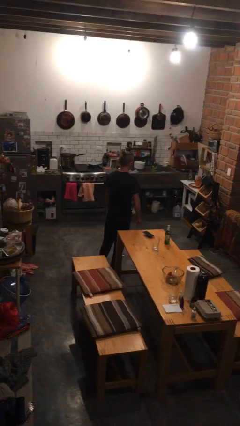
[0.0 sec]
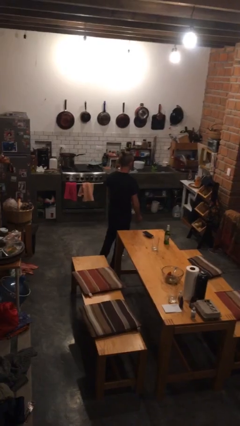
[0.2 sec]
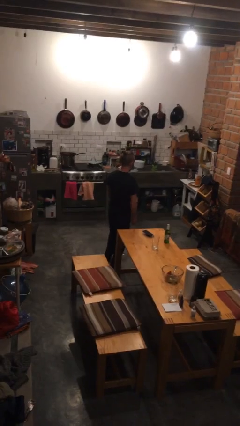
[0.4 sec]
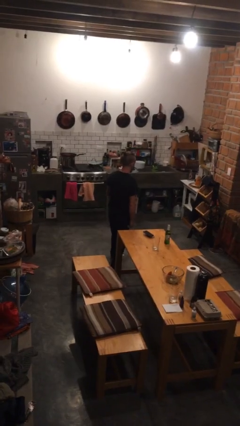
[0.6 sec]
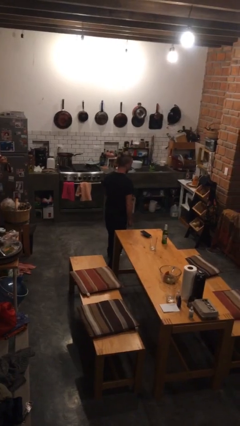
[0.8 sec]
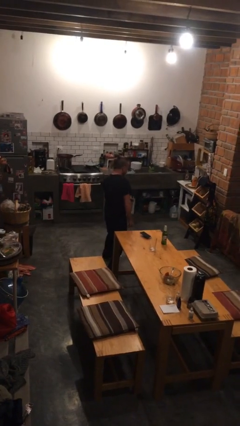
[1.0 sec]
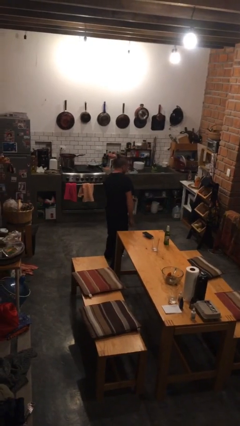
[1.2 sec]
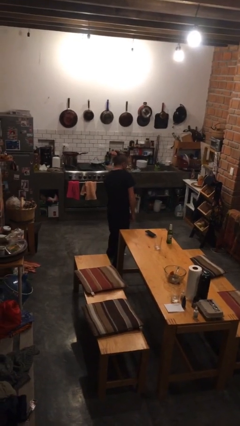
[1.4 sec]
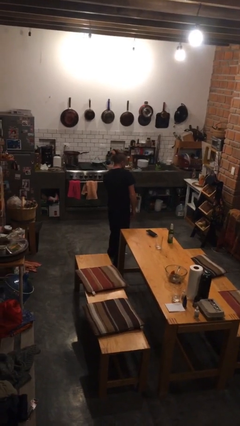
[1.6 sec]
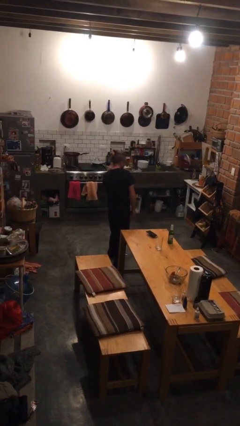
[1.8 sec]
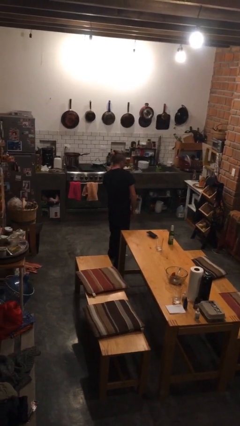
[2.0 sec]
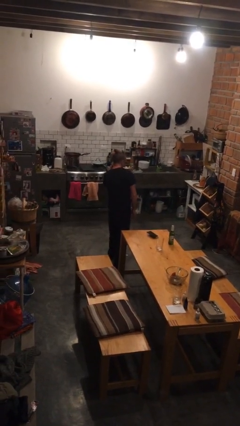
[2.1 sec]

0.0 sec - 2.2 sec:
person gestures listen closely

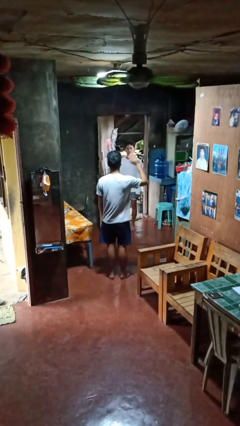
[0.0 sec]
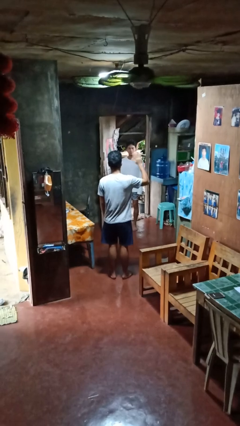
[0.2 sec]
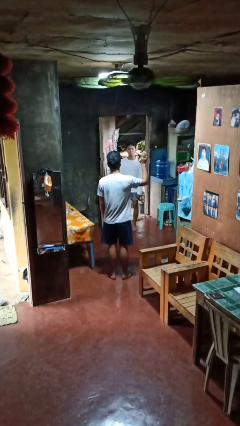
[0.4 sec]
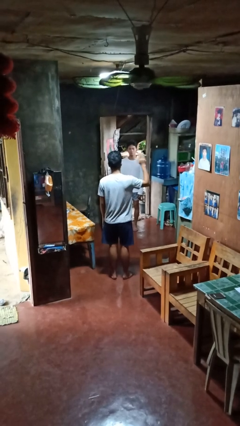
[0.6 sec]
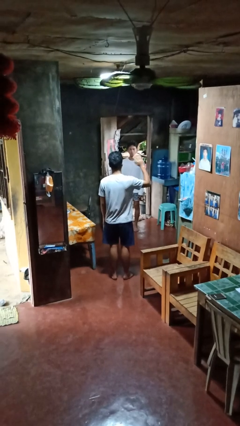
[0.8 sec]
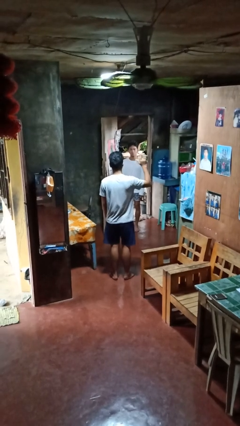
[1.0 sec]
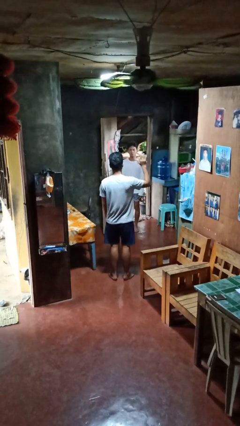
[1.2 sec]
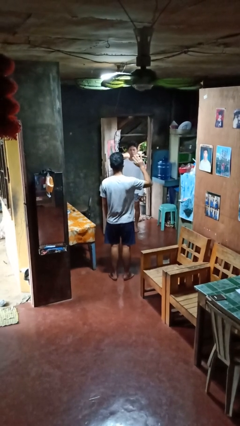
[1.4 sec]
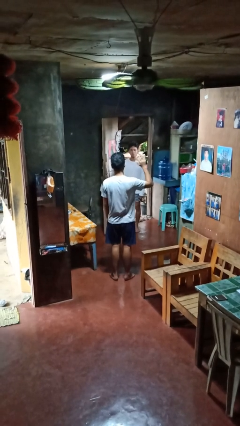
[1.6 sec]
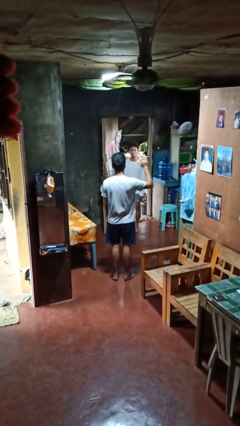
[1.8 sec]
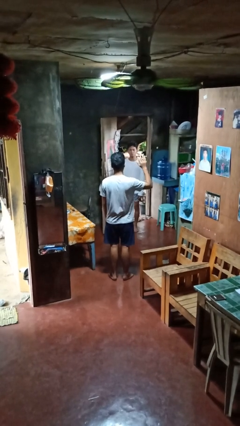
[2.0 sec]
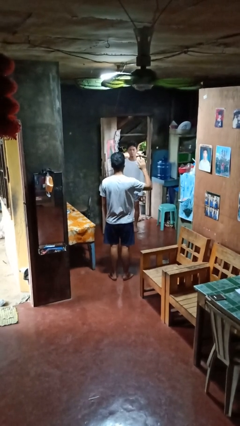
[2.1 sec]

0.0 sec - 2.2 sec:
person waves at person

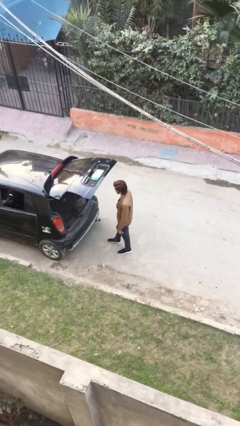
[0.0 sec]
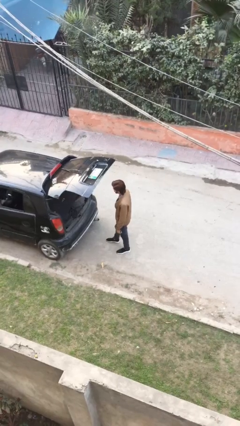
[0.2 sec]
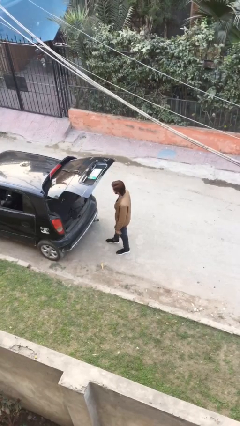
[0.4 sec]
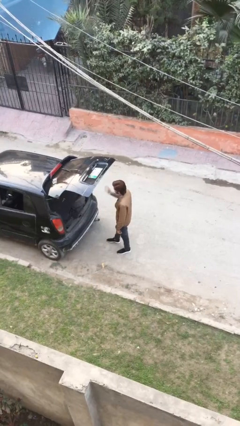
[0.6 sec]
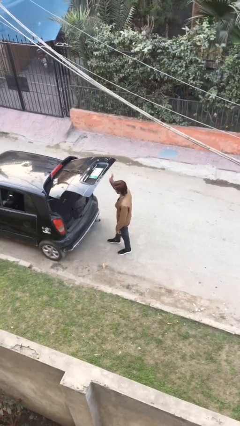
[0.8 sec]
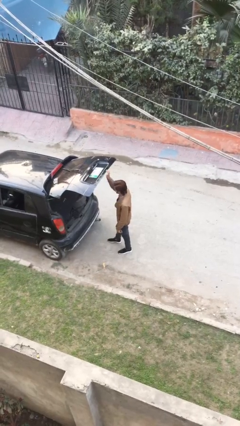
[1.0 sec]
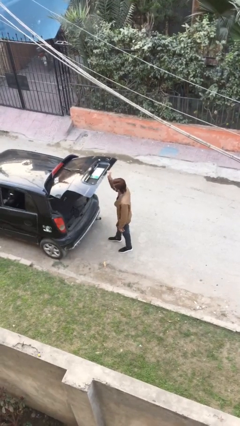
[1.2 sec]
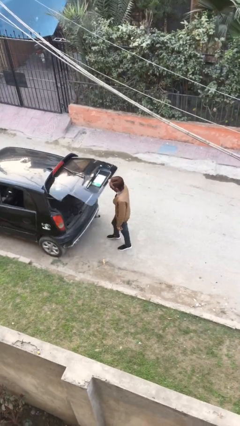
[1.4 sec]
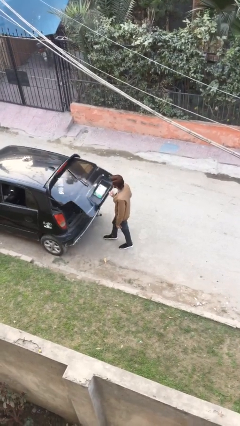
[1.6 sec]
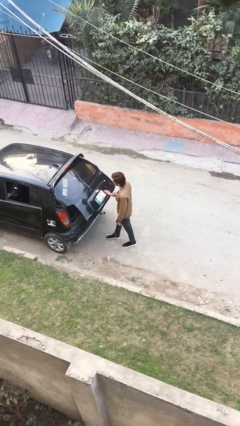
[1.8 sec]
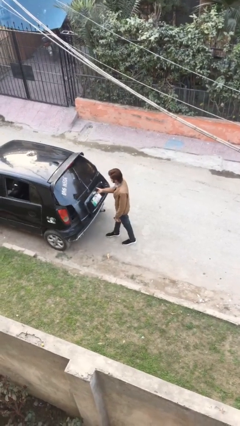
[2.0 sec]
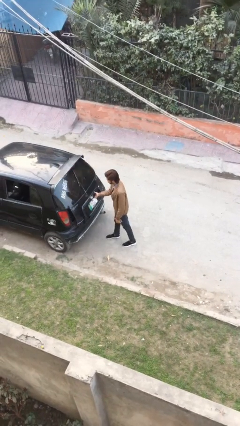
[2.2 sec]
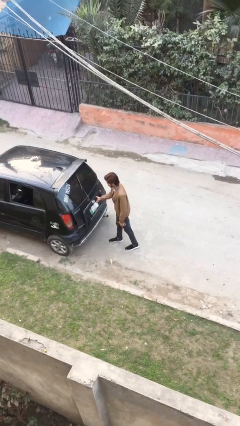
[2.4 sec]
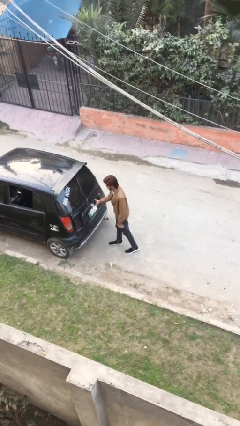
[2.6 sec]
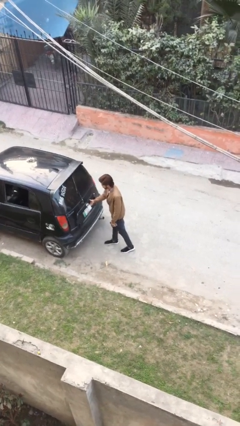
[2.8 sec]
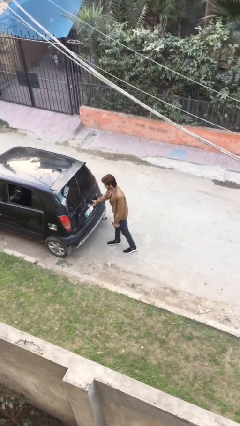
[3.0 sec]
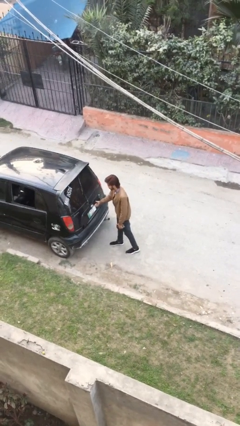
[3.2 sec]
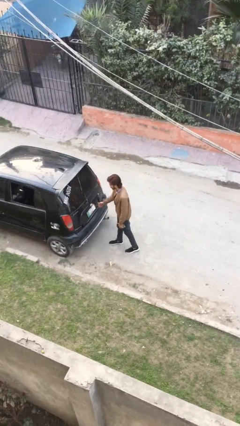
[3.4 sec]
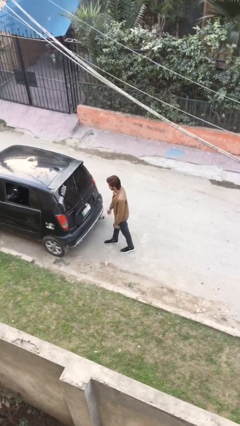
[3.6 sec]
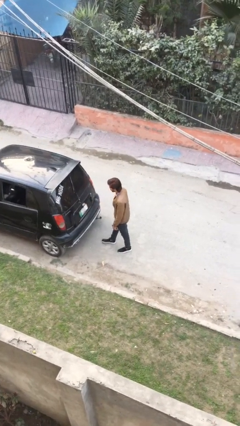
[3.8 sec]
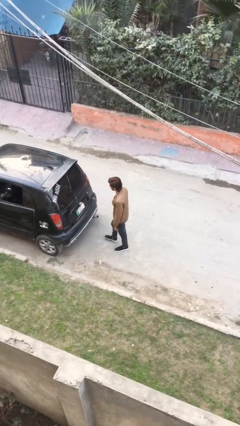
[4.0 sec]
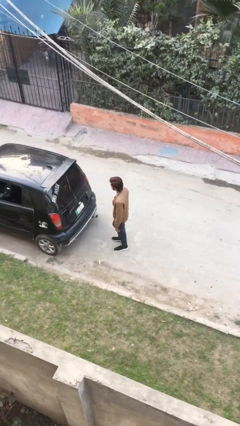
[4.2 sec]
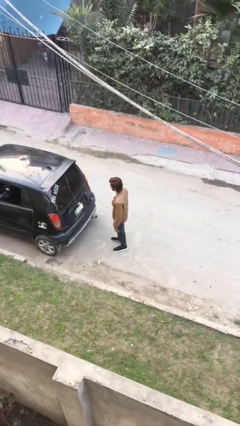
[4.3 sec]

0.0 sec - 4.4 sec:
person closes car trunk

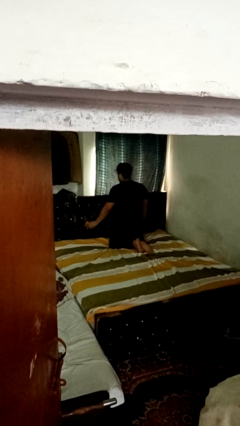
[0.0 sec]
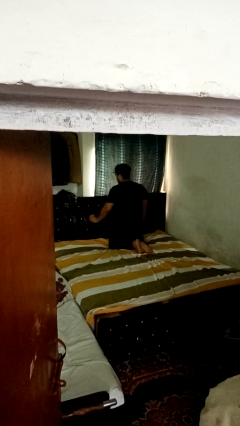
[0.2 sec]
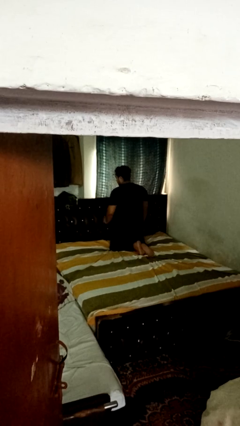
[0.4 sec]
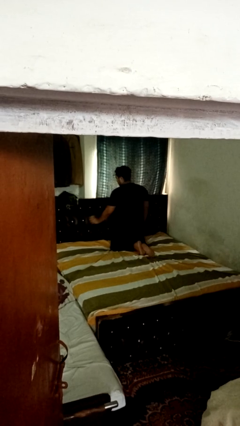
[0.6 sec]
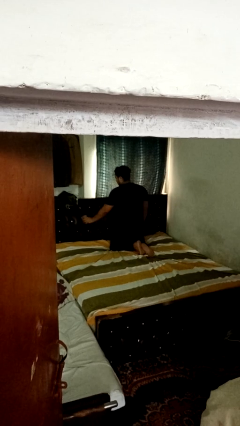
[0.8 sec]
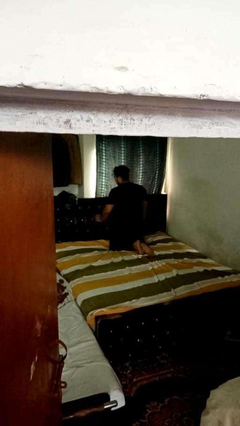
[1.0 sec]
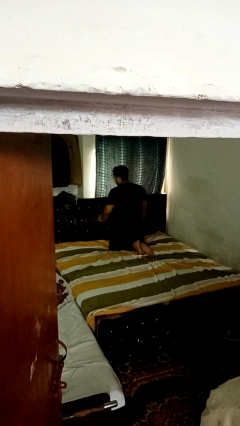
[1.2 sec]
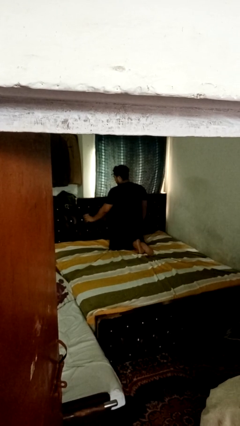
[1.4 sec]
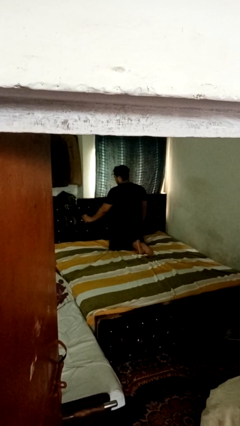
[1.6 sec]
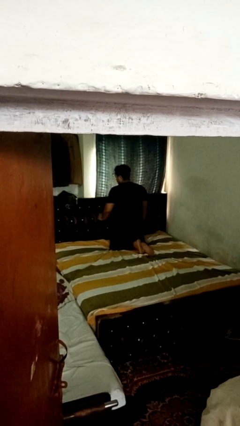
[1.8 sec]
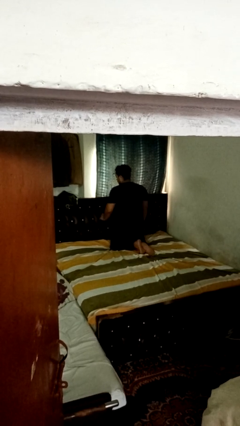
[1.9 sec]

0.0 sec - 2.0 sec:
person dusts furniture

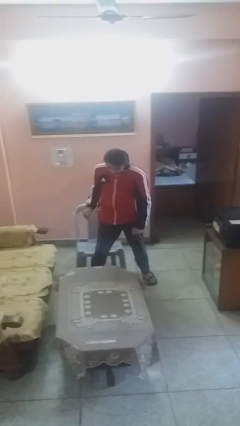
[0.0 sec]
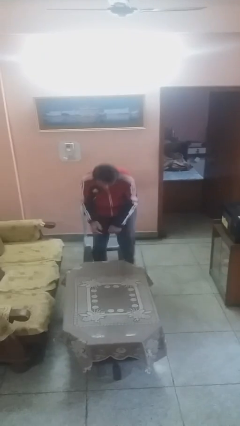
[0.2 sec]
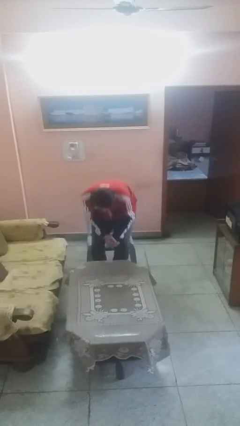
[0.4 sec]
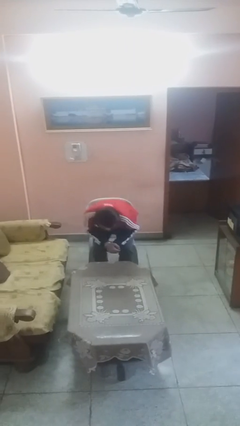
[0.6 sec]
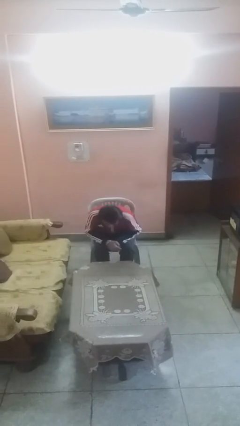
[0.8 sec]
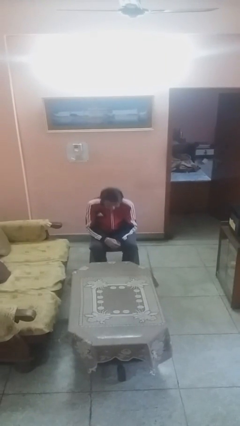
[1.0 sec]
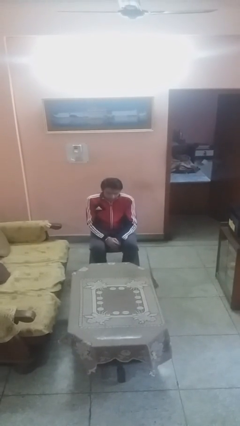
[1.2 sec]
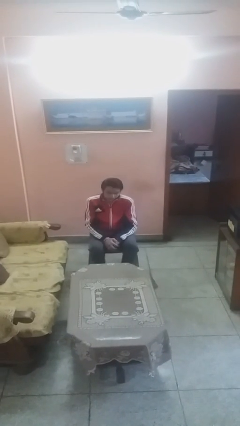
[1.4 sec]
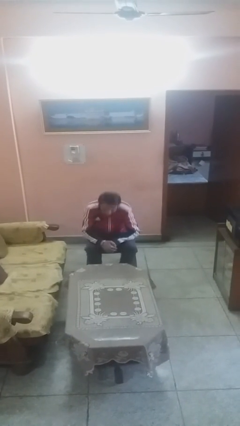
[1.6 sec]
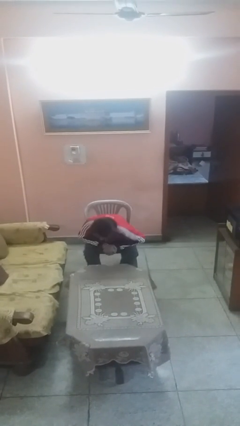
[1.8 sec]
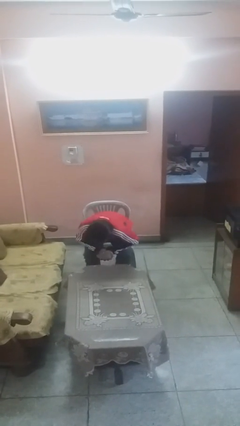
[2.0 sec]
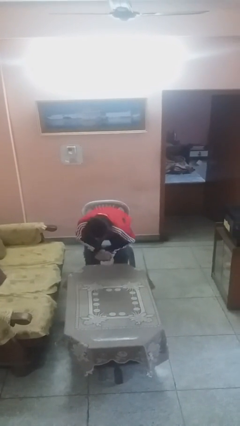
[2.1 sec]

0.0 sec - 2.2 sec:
person sits down

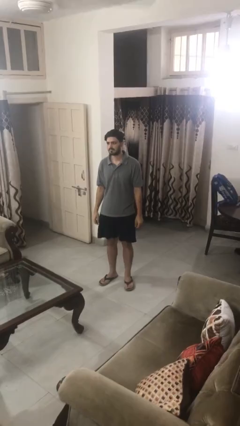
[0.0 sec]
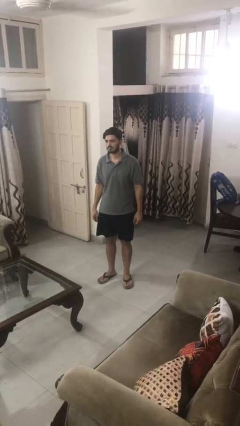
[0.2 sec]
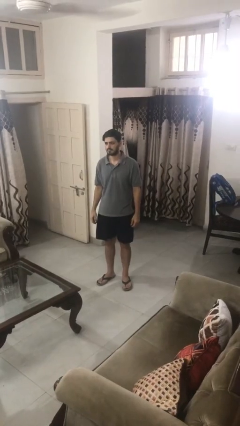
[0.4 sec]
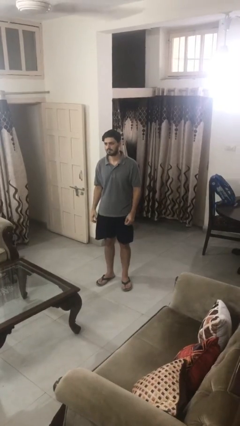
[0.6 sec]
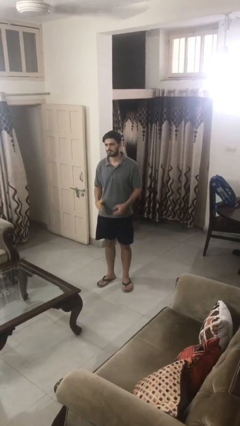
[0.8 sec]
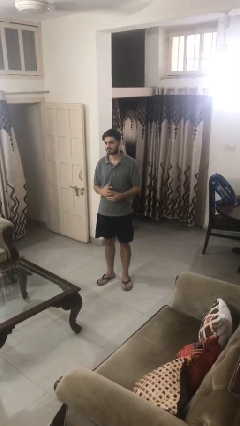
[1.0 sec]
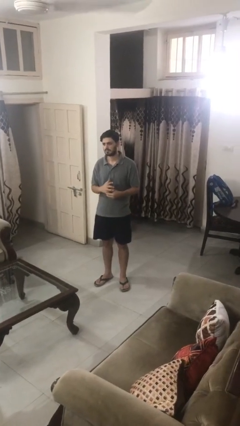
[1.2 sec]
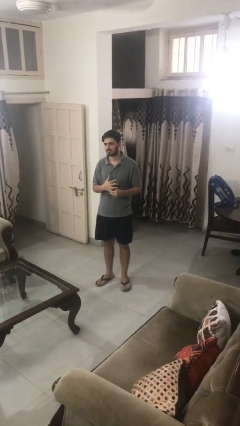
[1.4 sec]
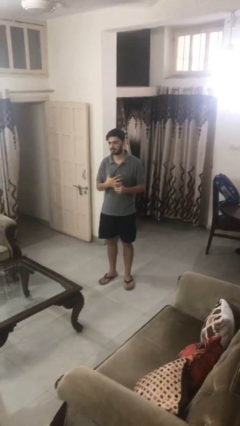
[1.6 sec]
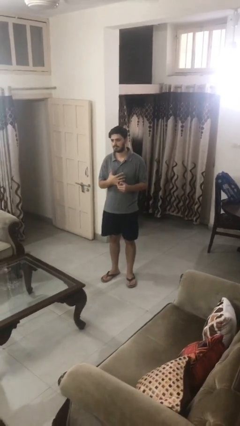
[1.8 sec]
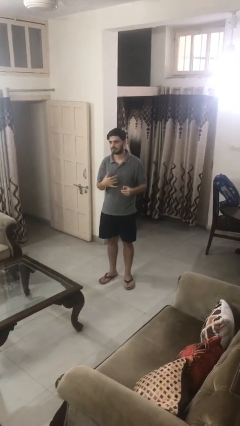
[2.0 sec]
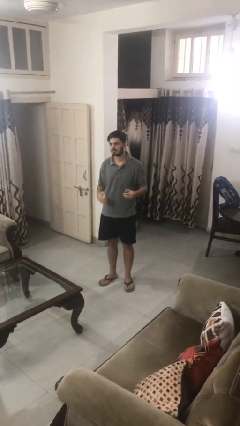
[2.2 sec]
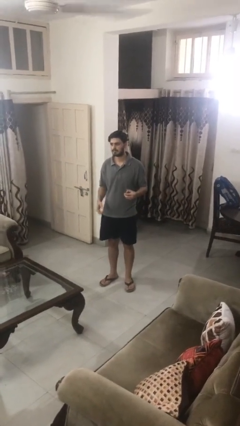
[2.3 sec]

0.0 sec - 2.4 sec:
person takes off ring

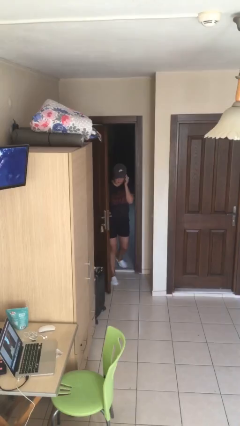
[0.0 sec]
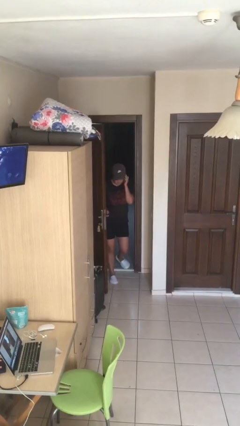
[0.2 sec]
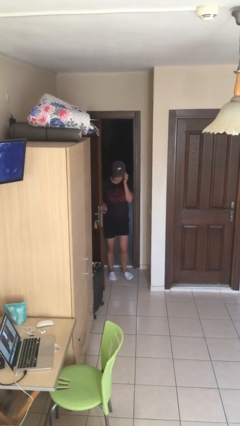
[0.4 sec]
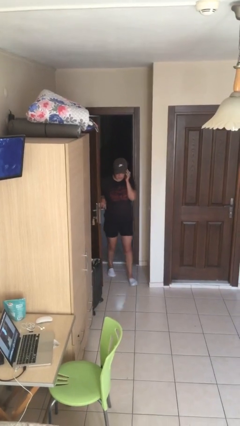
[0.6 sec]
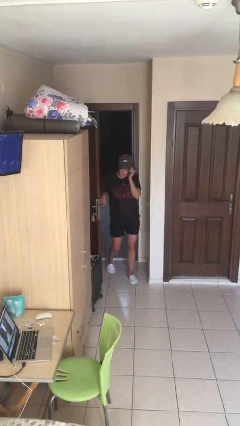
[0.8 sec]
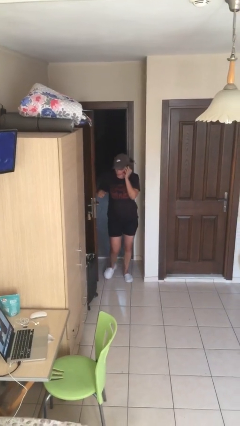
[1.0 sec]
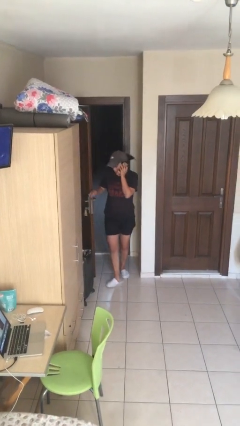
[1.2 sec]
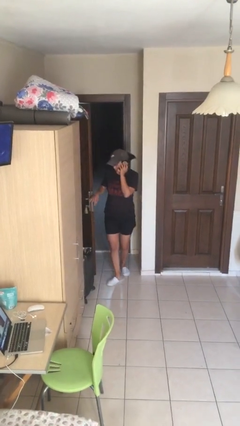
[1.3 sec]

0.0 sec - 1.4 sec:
person enters scene through structure
